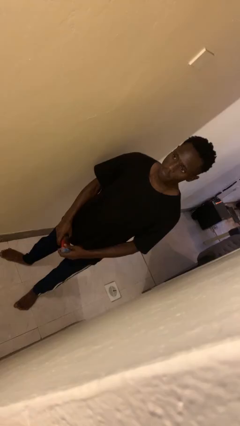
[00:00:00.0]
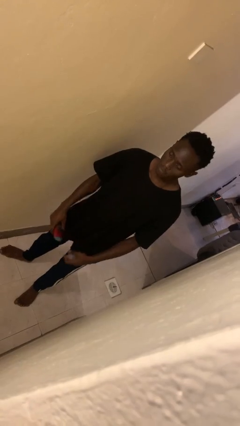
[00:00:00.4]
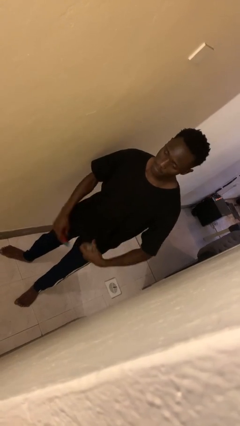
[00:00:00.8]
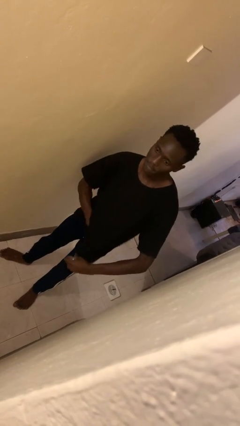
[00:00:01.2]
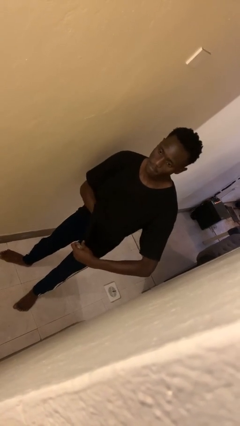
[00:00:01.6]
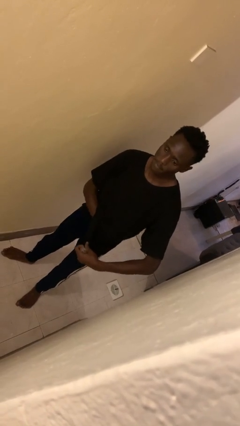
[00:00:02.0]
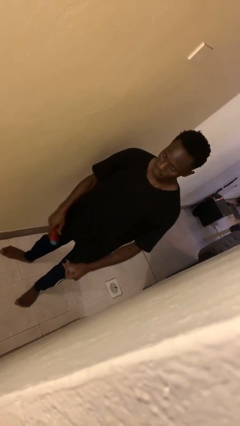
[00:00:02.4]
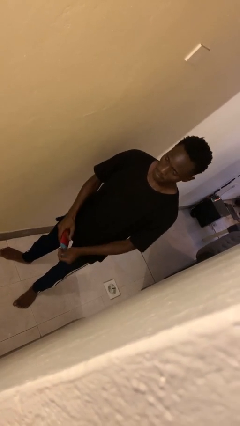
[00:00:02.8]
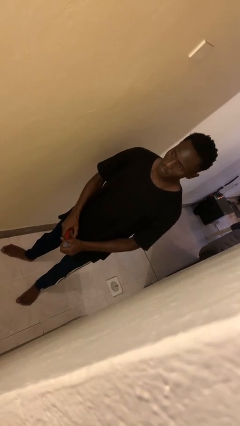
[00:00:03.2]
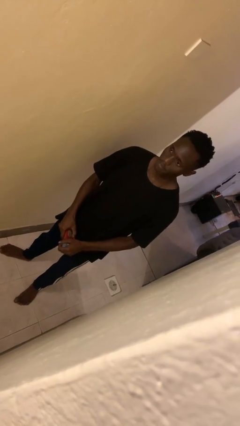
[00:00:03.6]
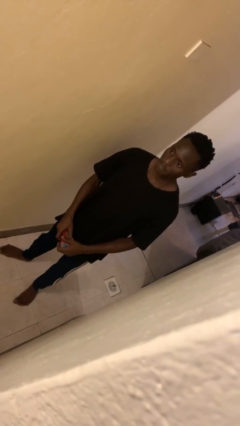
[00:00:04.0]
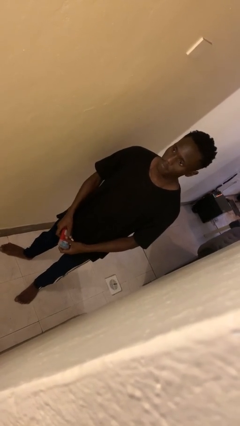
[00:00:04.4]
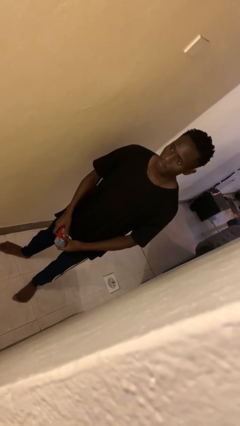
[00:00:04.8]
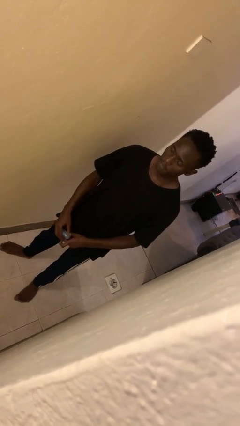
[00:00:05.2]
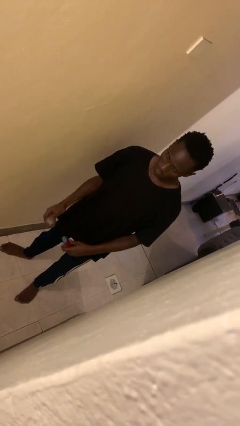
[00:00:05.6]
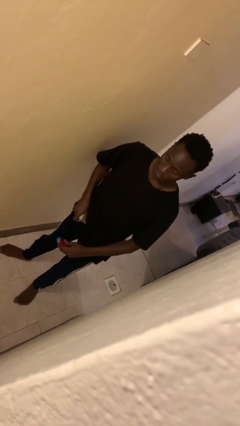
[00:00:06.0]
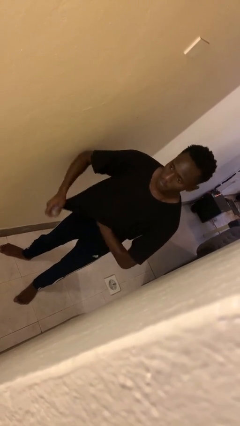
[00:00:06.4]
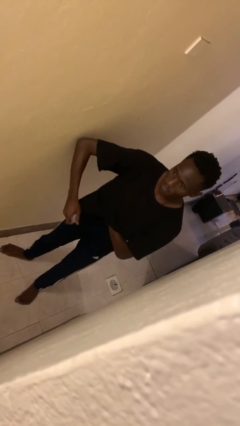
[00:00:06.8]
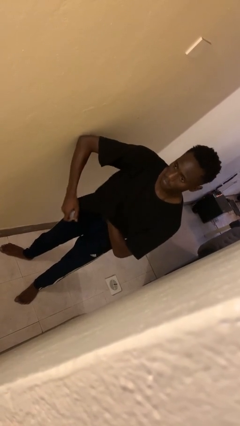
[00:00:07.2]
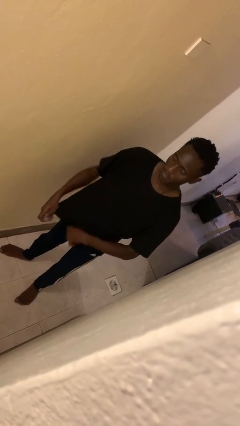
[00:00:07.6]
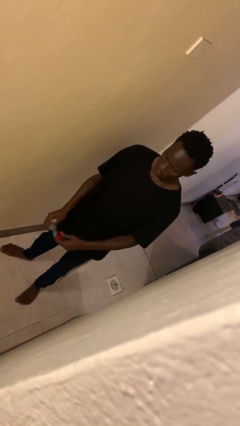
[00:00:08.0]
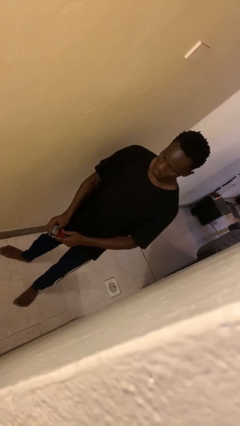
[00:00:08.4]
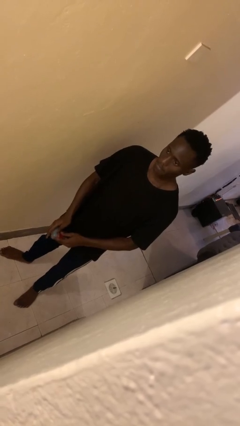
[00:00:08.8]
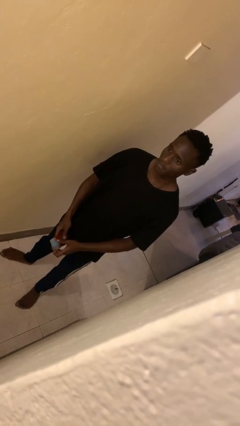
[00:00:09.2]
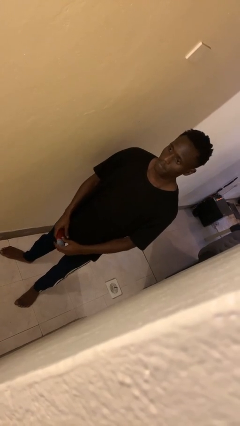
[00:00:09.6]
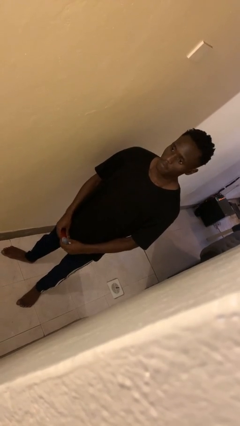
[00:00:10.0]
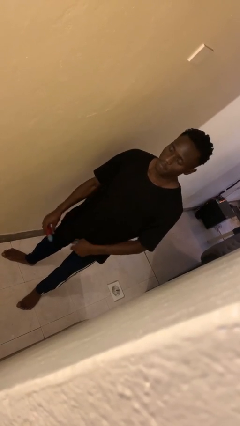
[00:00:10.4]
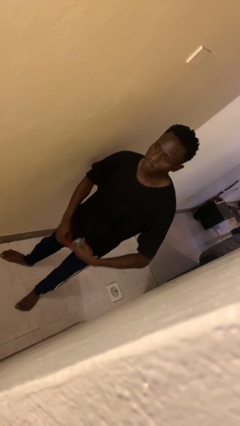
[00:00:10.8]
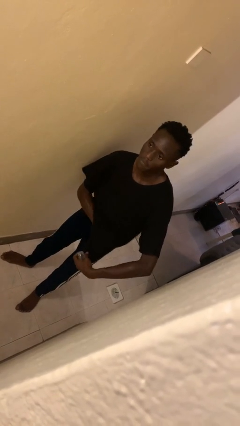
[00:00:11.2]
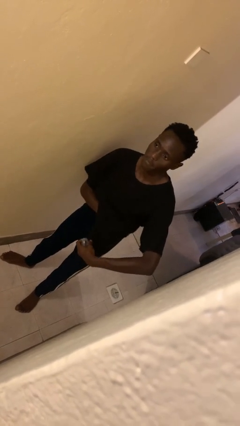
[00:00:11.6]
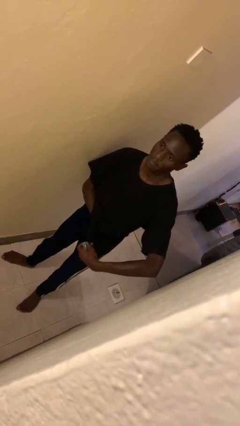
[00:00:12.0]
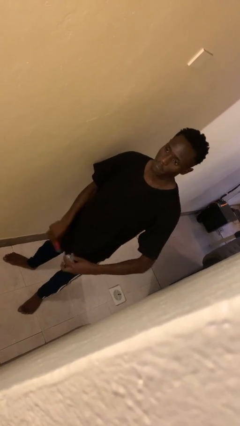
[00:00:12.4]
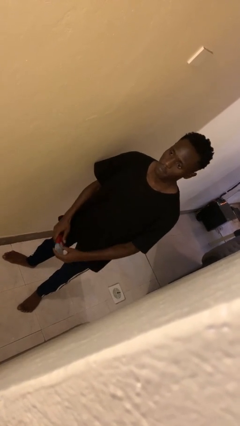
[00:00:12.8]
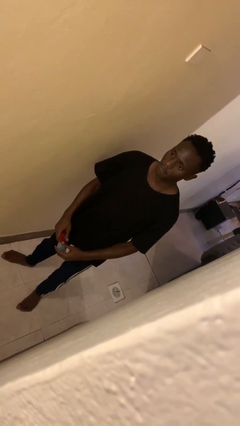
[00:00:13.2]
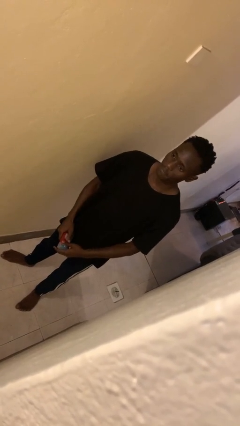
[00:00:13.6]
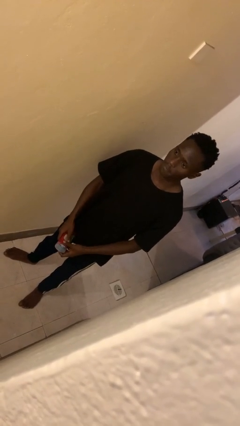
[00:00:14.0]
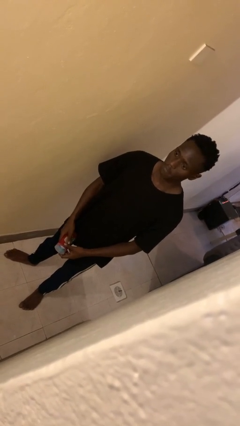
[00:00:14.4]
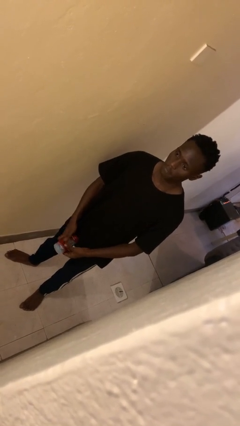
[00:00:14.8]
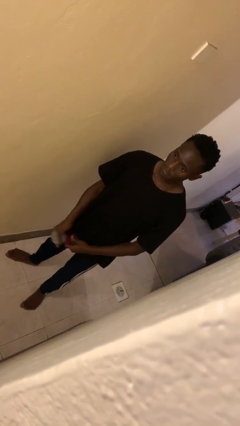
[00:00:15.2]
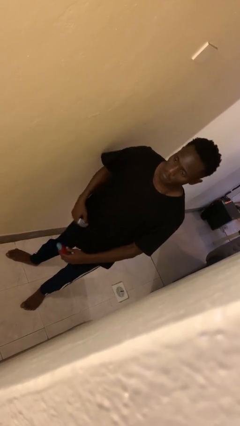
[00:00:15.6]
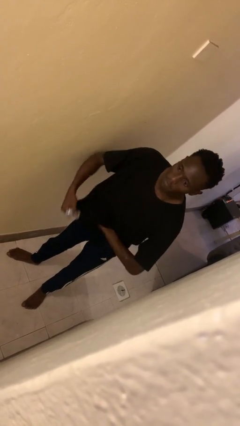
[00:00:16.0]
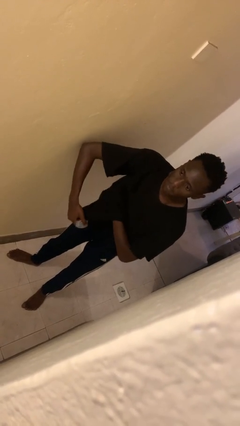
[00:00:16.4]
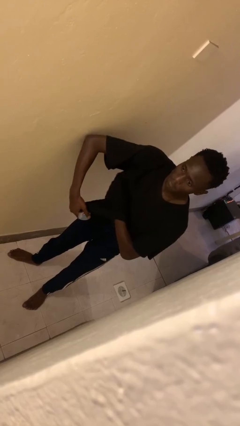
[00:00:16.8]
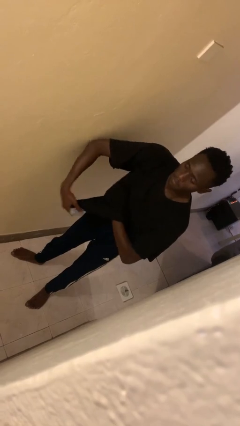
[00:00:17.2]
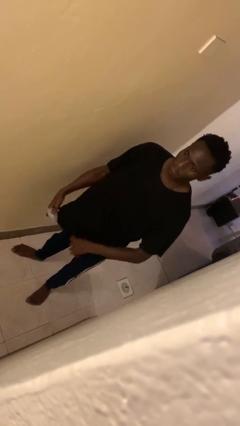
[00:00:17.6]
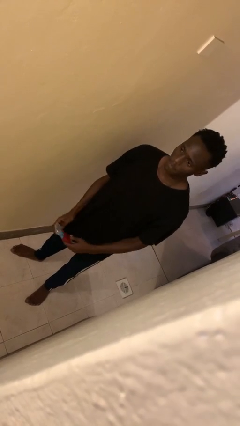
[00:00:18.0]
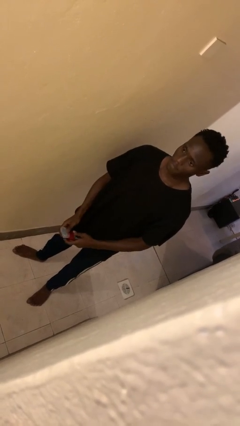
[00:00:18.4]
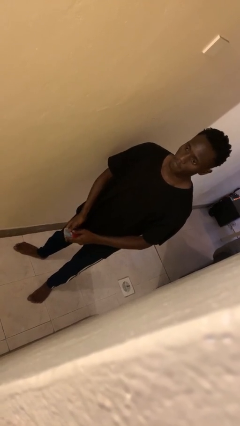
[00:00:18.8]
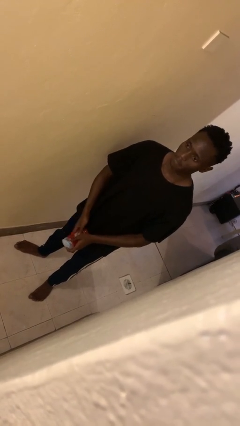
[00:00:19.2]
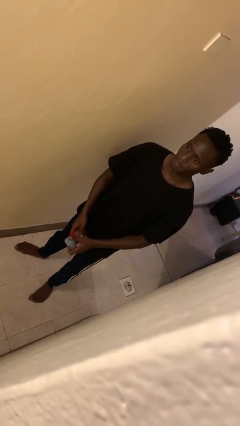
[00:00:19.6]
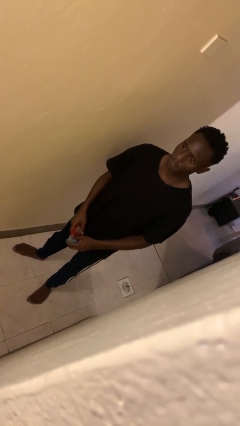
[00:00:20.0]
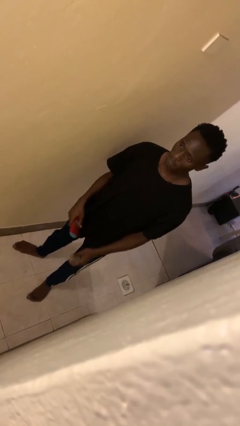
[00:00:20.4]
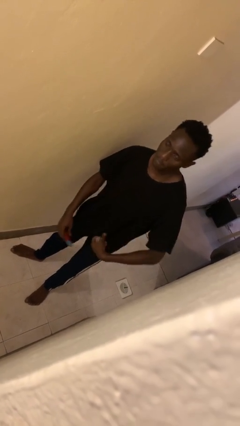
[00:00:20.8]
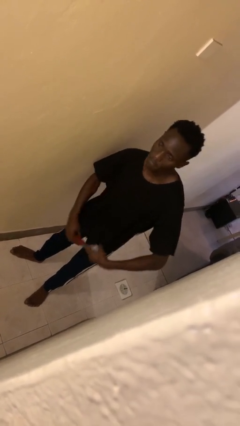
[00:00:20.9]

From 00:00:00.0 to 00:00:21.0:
person applies deodorant

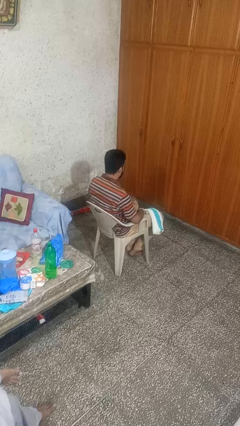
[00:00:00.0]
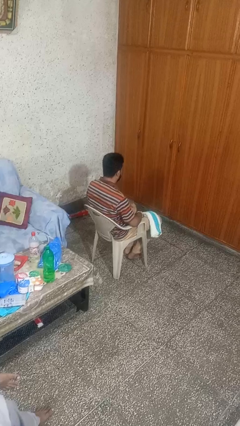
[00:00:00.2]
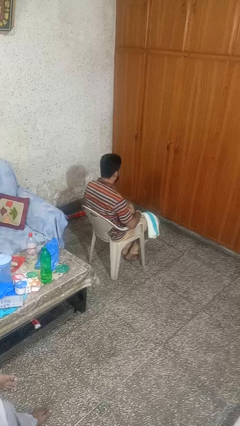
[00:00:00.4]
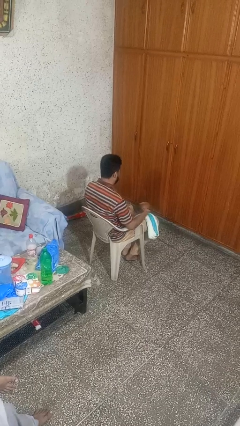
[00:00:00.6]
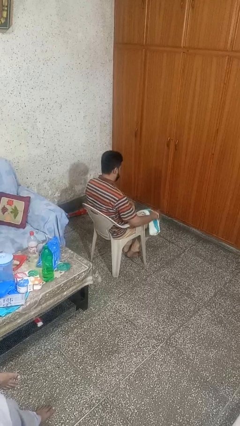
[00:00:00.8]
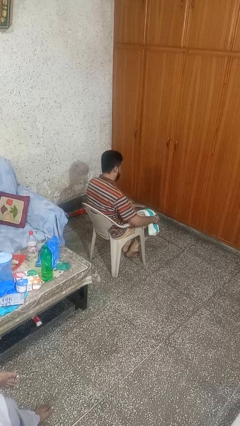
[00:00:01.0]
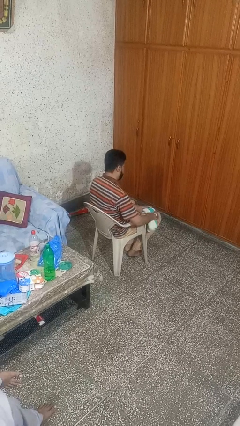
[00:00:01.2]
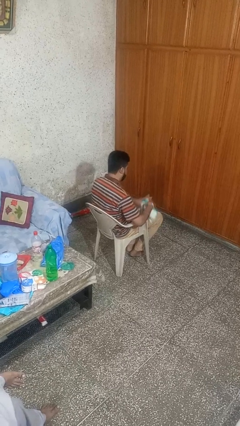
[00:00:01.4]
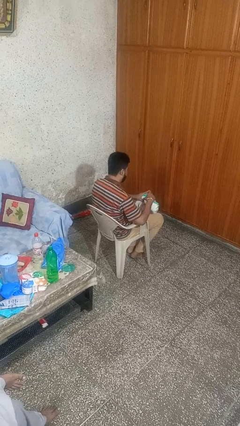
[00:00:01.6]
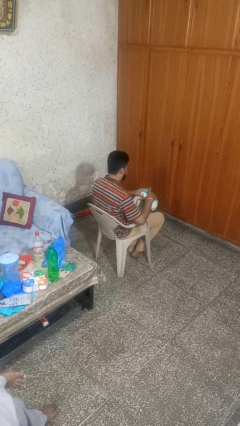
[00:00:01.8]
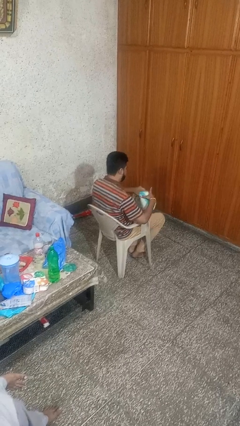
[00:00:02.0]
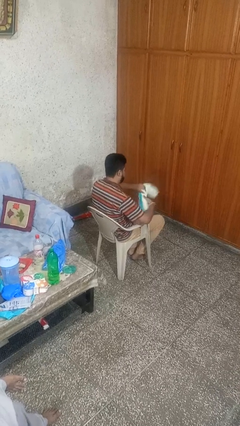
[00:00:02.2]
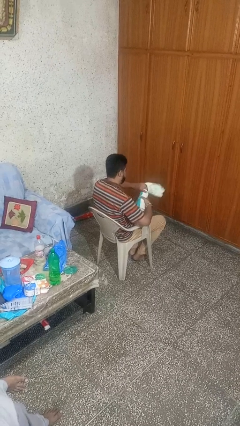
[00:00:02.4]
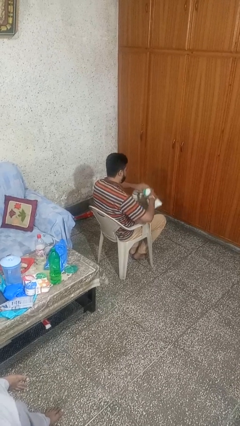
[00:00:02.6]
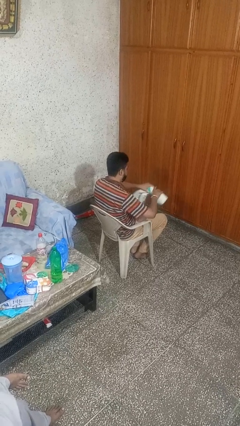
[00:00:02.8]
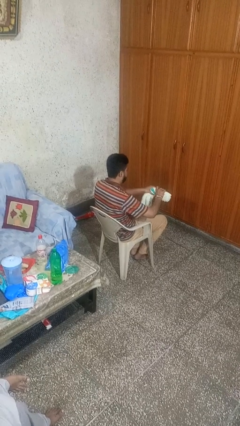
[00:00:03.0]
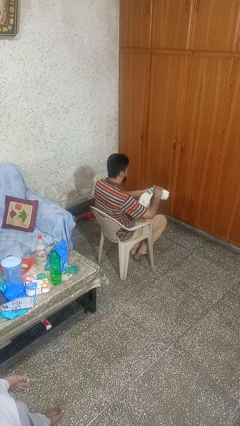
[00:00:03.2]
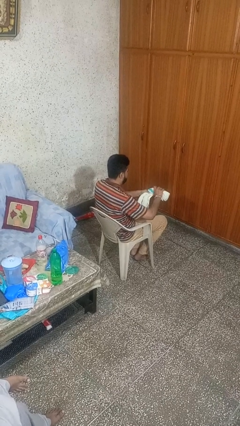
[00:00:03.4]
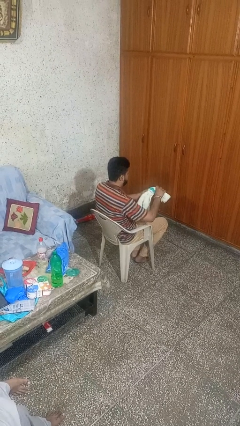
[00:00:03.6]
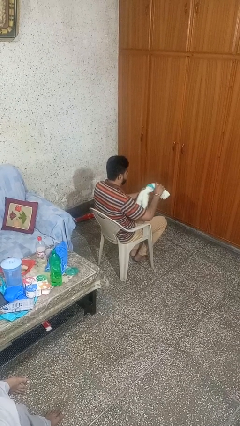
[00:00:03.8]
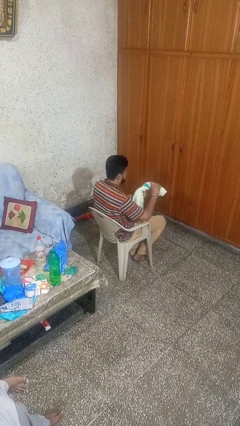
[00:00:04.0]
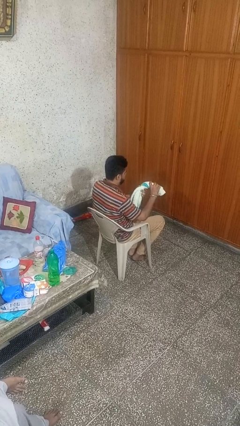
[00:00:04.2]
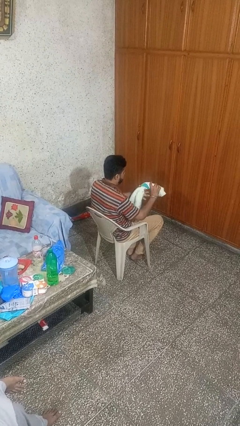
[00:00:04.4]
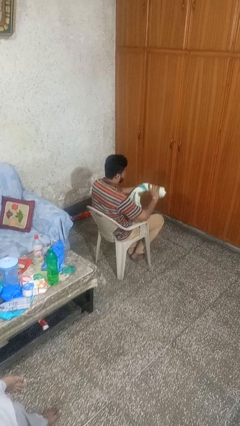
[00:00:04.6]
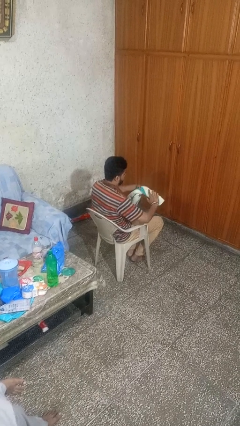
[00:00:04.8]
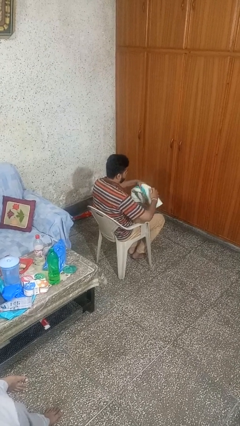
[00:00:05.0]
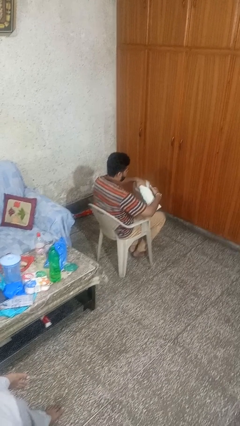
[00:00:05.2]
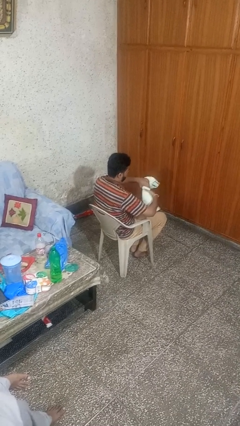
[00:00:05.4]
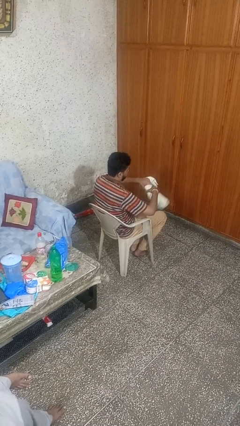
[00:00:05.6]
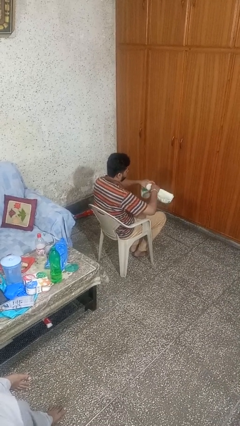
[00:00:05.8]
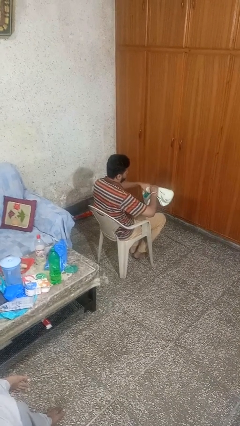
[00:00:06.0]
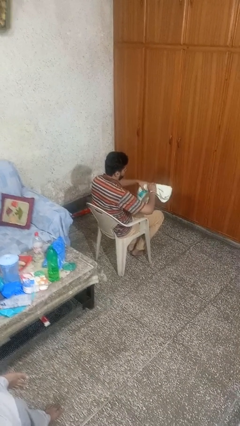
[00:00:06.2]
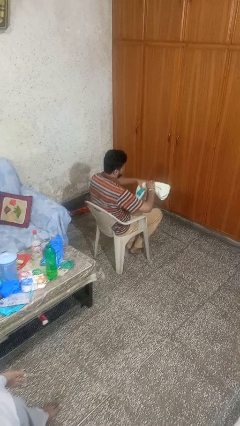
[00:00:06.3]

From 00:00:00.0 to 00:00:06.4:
person squeezes object

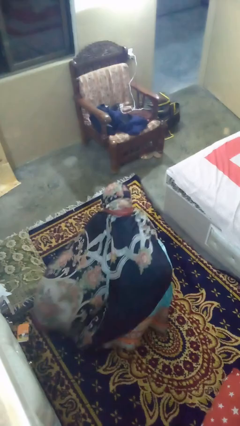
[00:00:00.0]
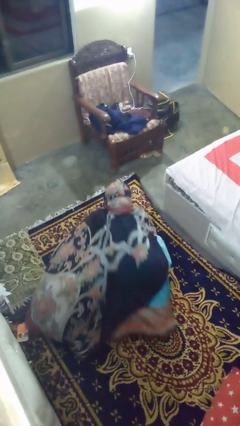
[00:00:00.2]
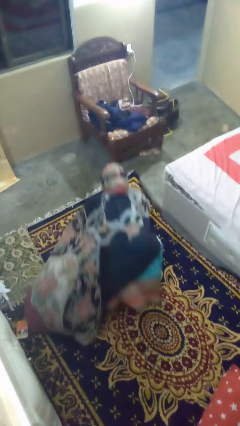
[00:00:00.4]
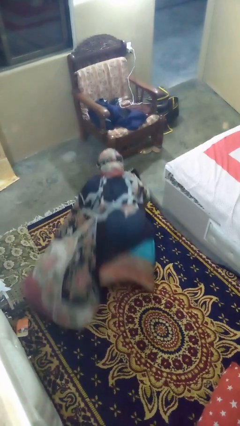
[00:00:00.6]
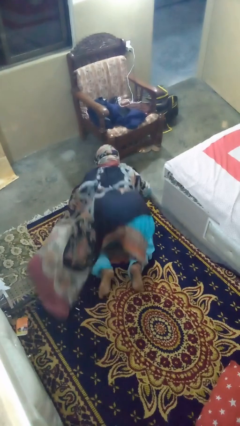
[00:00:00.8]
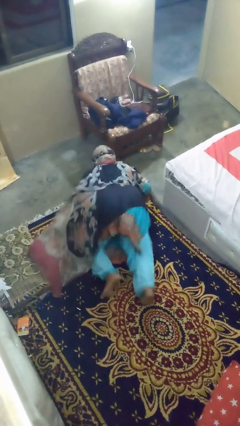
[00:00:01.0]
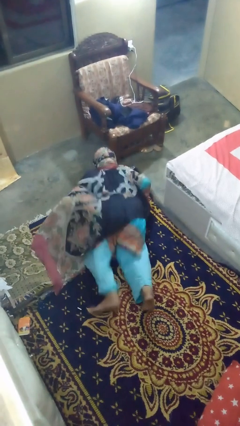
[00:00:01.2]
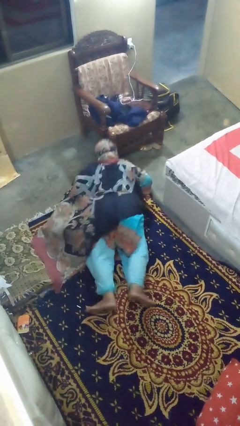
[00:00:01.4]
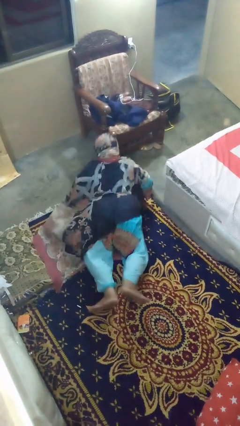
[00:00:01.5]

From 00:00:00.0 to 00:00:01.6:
person exercises with pushup
